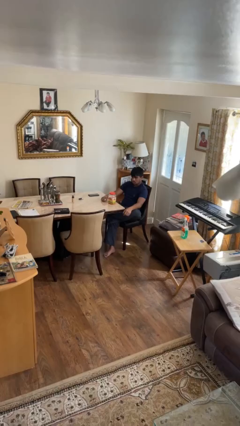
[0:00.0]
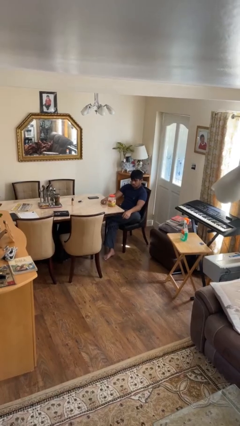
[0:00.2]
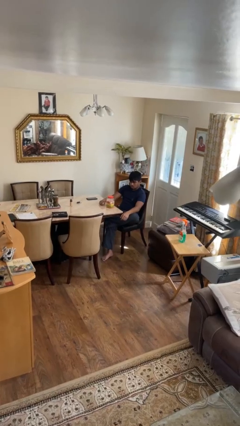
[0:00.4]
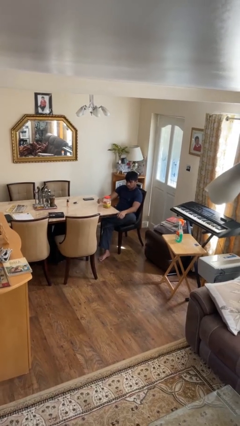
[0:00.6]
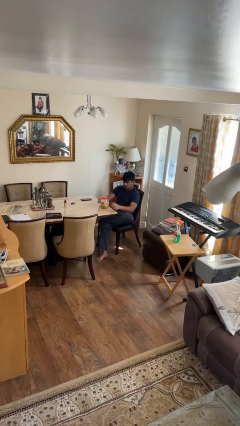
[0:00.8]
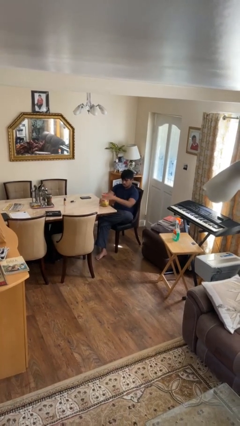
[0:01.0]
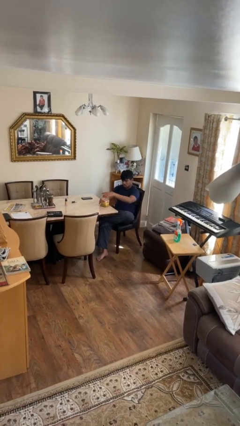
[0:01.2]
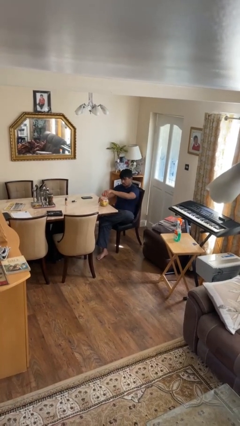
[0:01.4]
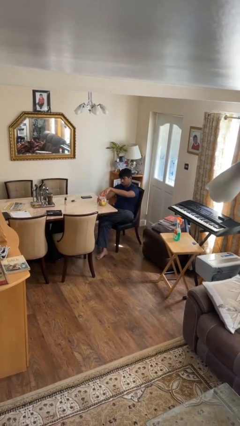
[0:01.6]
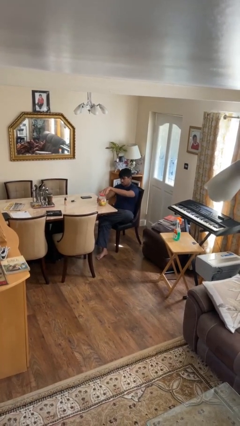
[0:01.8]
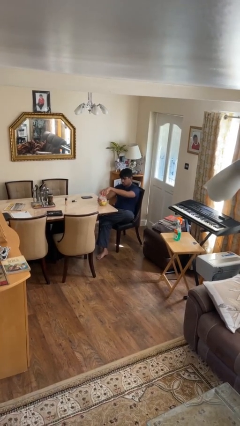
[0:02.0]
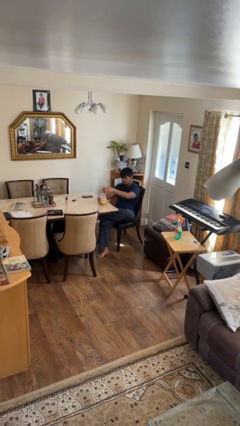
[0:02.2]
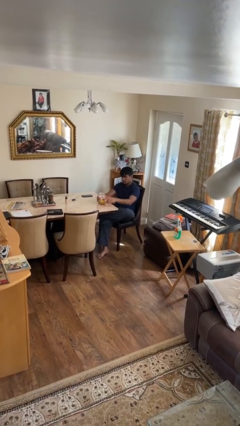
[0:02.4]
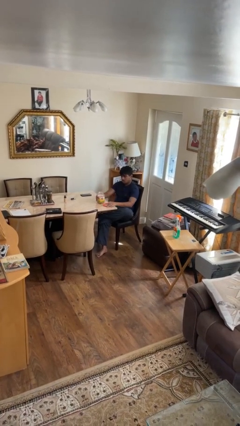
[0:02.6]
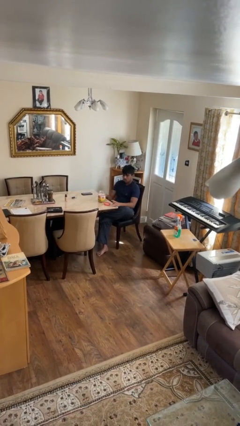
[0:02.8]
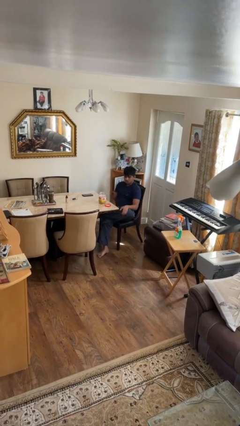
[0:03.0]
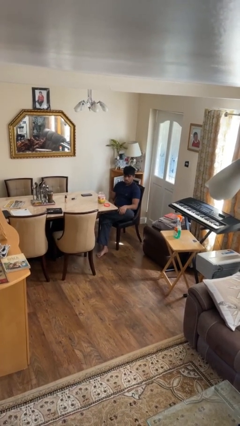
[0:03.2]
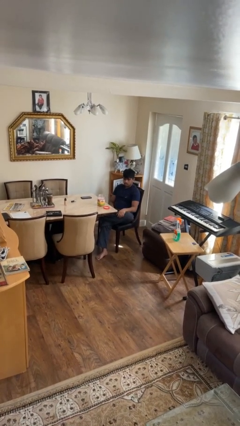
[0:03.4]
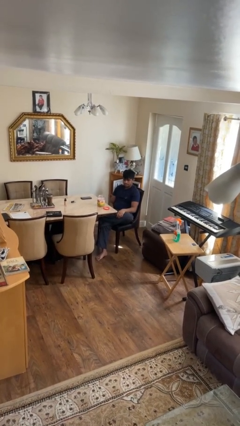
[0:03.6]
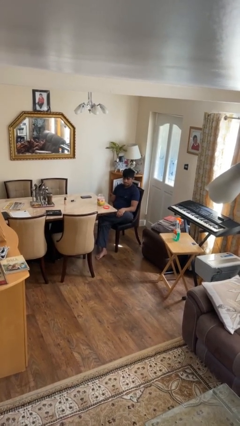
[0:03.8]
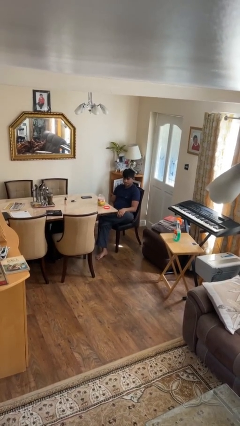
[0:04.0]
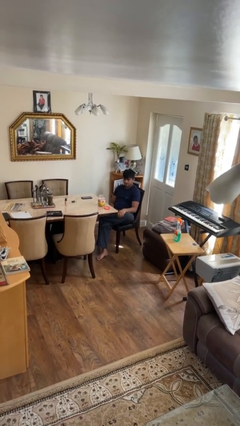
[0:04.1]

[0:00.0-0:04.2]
person opens jar

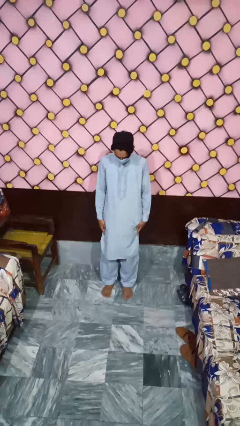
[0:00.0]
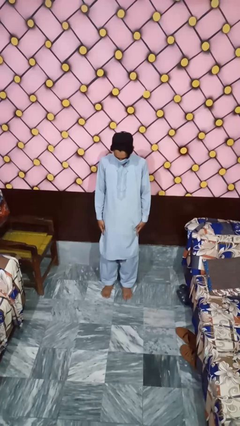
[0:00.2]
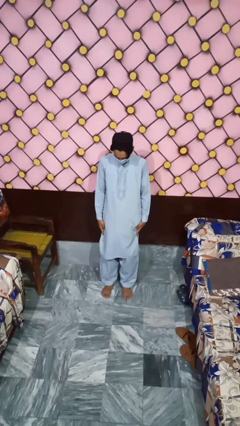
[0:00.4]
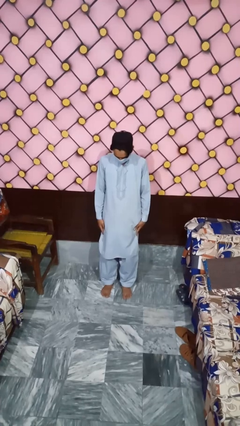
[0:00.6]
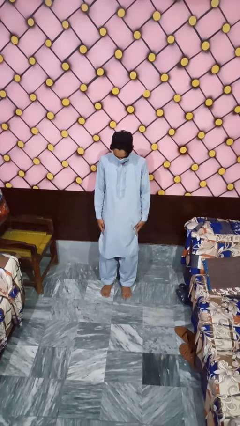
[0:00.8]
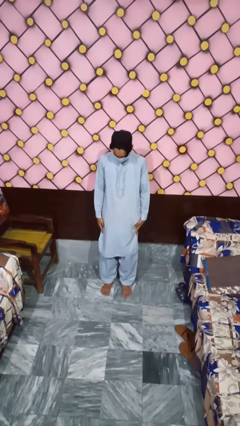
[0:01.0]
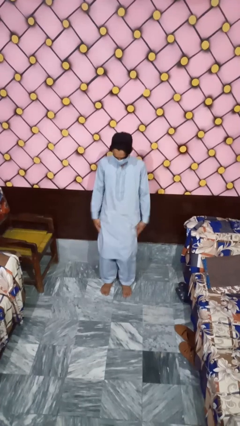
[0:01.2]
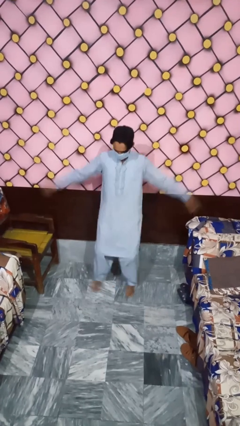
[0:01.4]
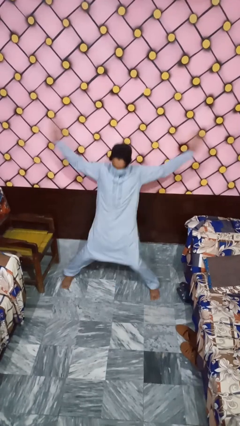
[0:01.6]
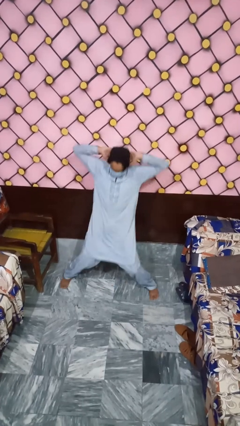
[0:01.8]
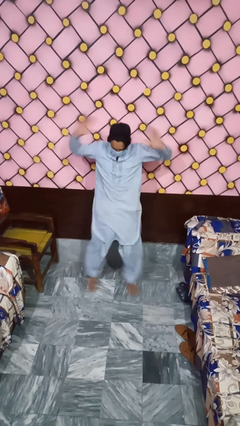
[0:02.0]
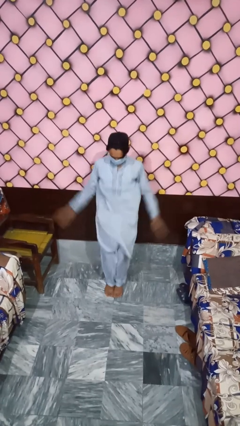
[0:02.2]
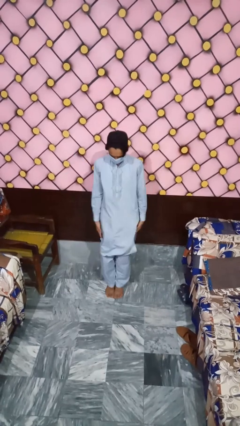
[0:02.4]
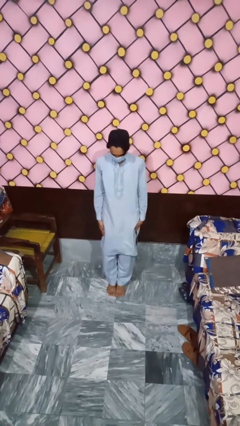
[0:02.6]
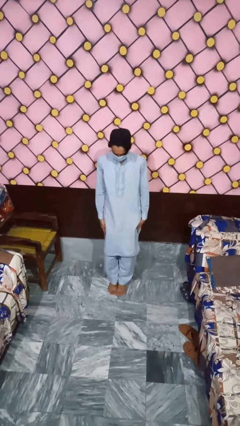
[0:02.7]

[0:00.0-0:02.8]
person exercises with jumping jacks

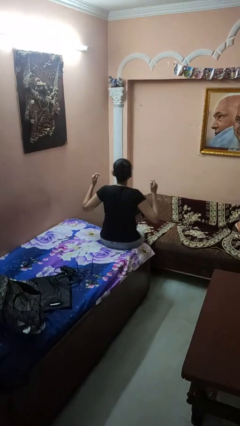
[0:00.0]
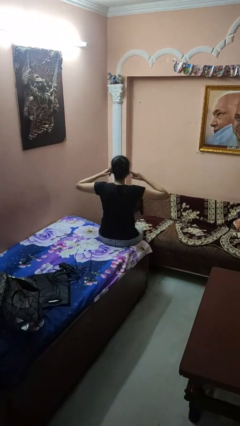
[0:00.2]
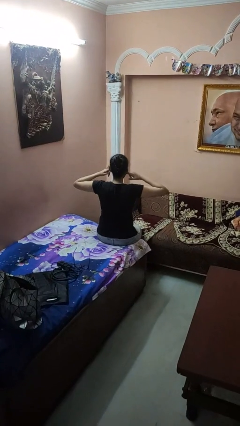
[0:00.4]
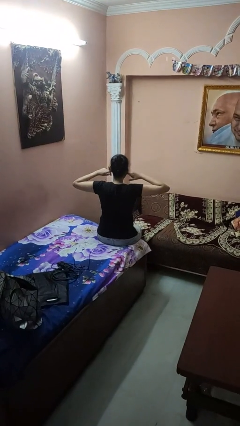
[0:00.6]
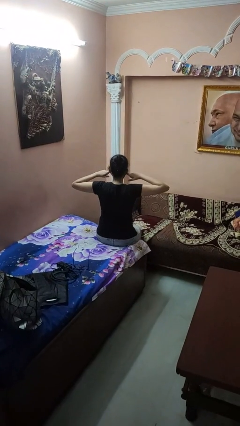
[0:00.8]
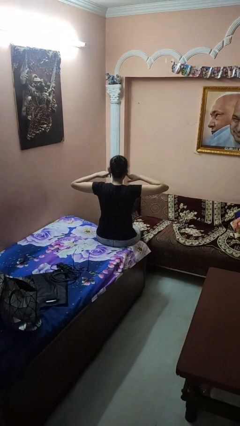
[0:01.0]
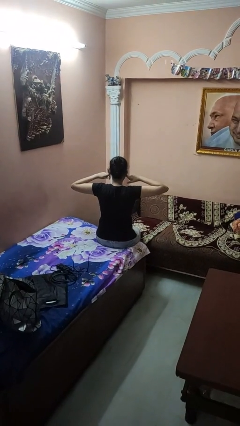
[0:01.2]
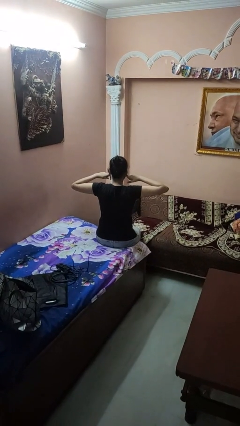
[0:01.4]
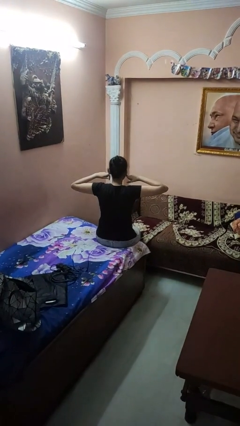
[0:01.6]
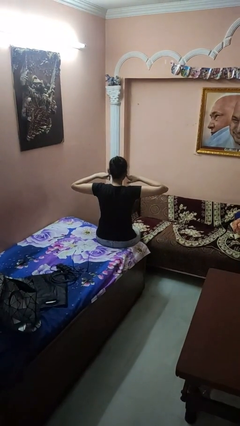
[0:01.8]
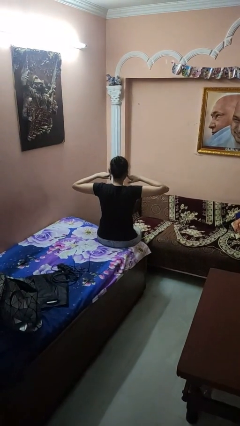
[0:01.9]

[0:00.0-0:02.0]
person puts fingers in ear

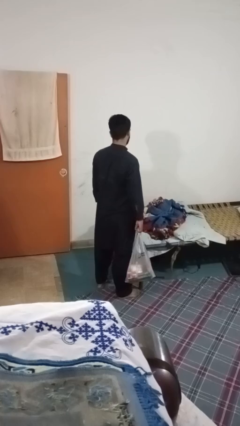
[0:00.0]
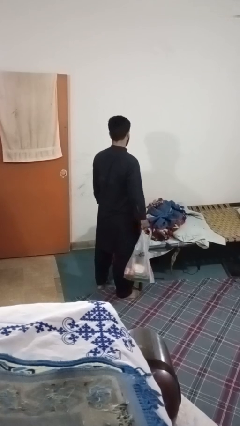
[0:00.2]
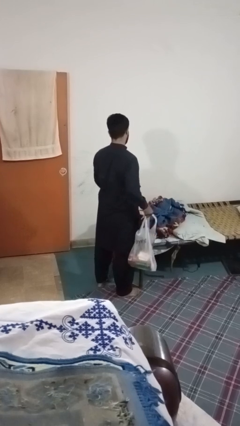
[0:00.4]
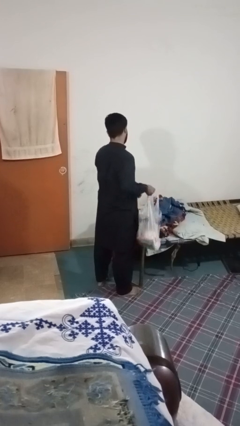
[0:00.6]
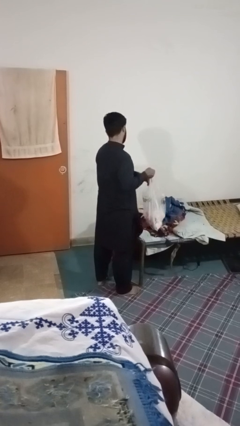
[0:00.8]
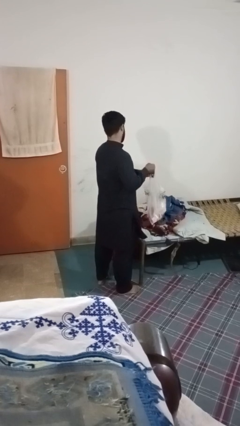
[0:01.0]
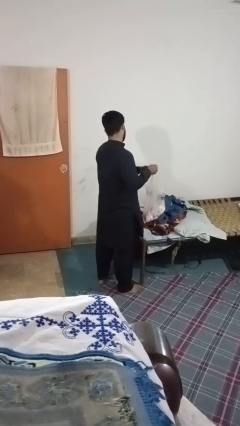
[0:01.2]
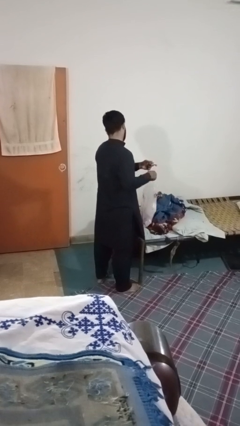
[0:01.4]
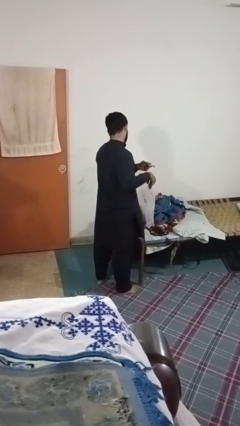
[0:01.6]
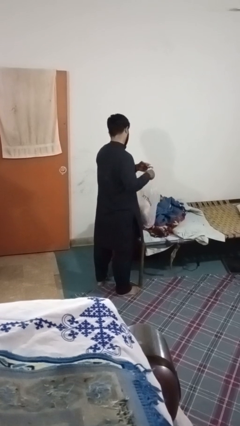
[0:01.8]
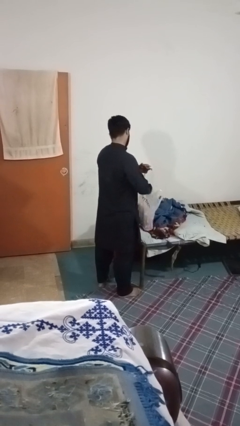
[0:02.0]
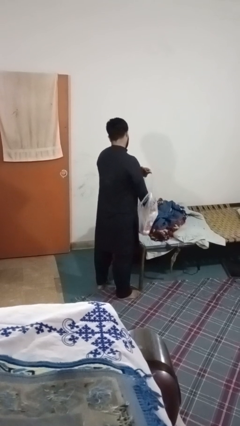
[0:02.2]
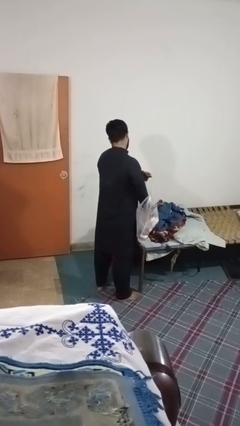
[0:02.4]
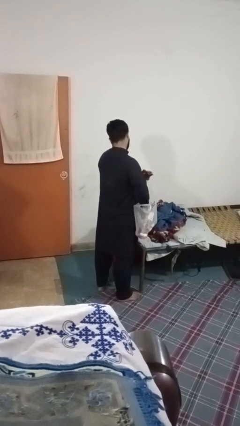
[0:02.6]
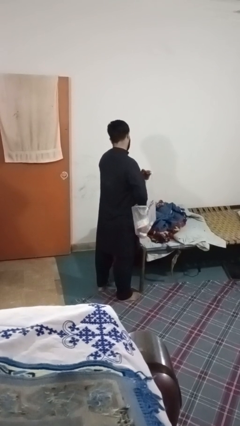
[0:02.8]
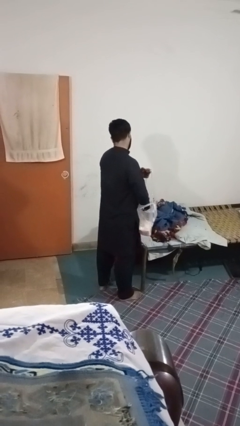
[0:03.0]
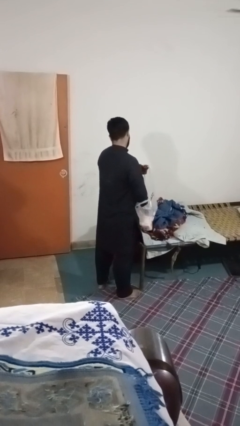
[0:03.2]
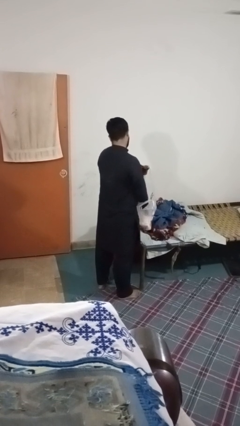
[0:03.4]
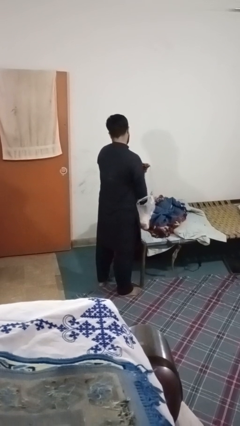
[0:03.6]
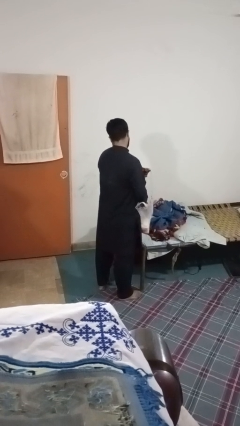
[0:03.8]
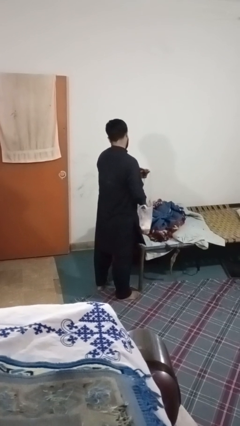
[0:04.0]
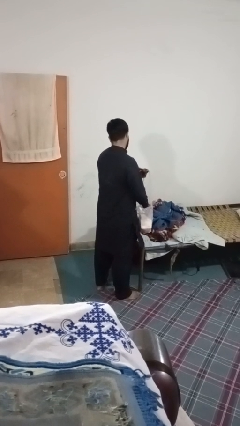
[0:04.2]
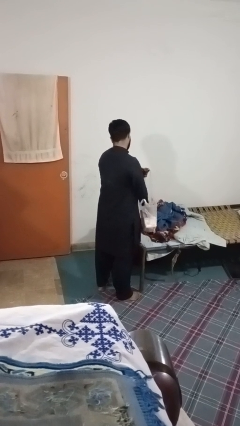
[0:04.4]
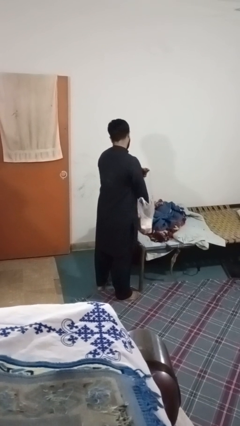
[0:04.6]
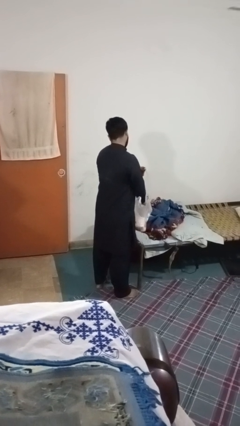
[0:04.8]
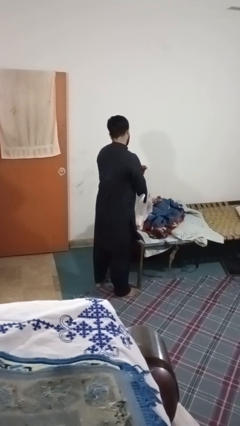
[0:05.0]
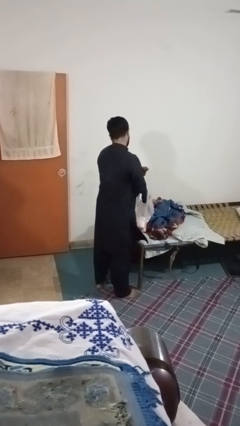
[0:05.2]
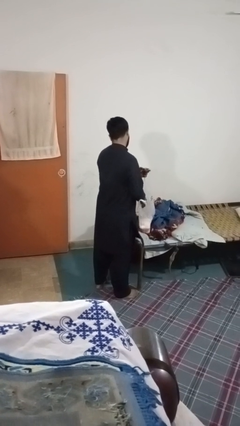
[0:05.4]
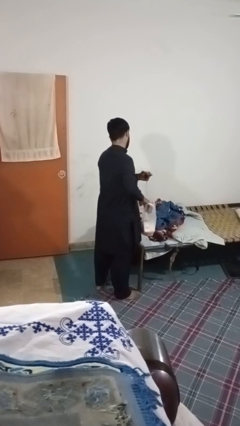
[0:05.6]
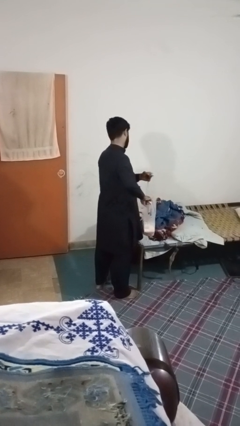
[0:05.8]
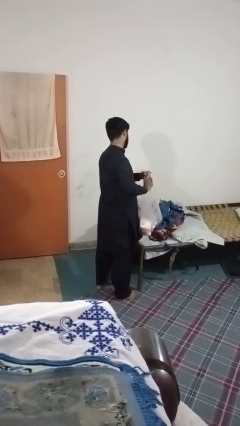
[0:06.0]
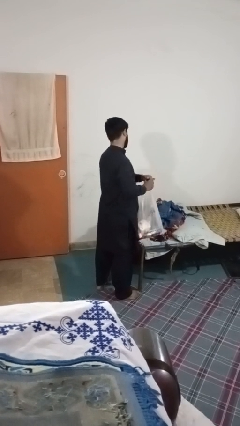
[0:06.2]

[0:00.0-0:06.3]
person searches in bag

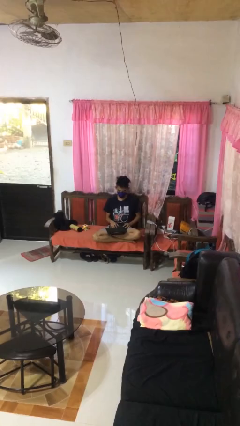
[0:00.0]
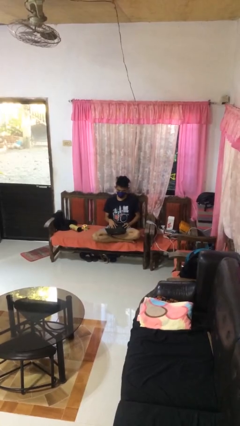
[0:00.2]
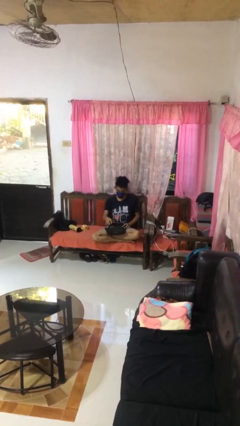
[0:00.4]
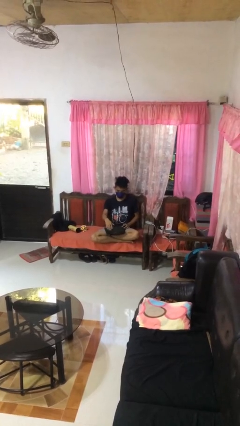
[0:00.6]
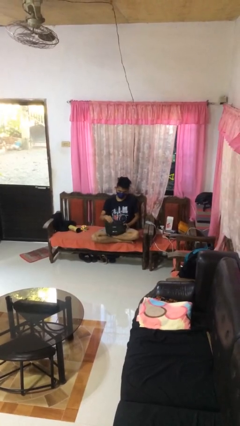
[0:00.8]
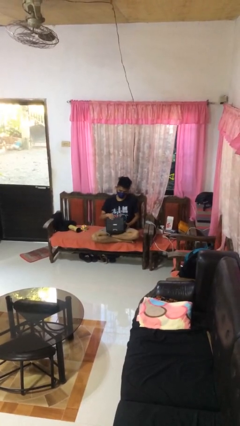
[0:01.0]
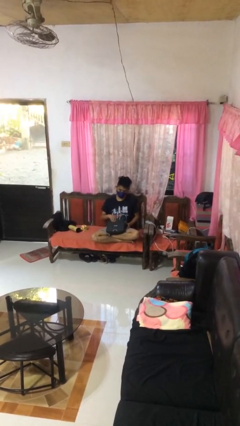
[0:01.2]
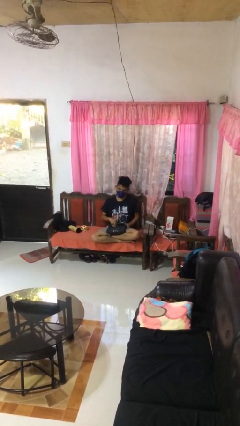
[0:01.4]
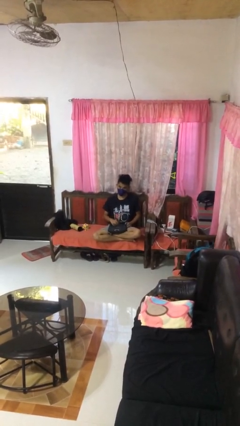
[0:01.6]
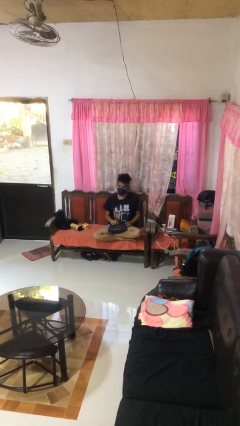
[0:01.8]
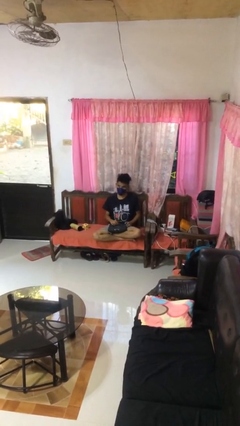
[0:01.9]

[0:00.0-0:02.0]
person closes laptop
